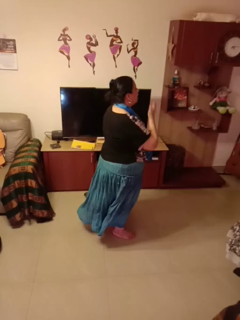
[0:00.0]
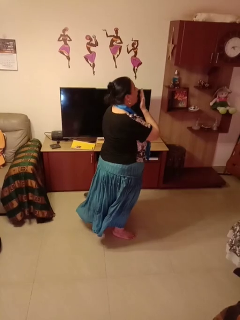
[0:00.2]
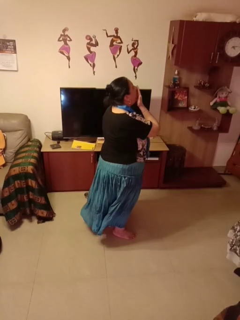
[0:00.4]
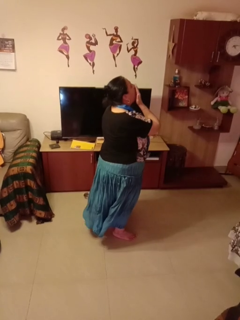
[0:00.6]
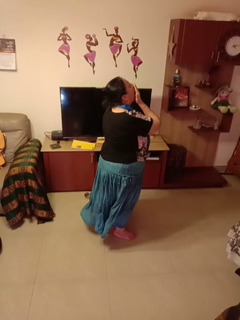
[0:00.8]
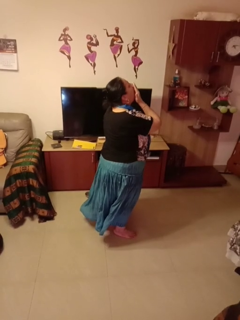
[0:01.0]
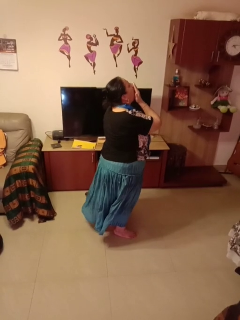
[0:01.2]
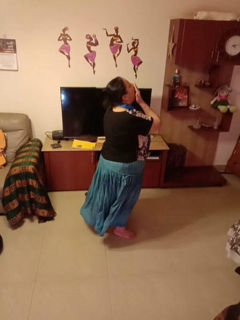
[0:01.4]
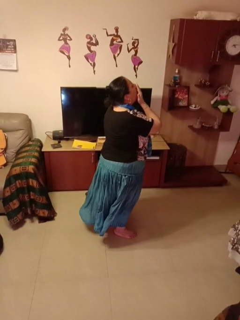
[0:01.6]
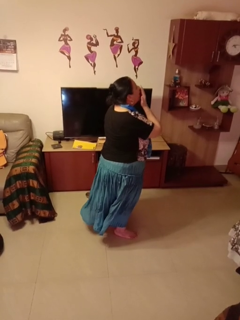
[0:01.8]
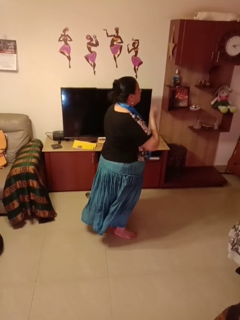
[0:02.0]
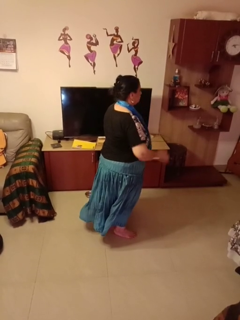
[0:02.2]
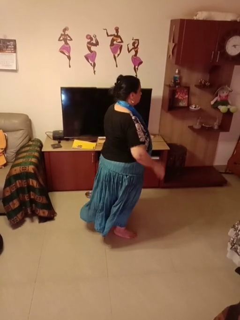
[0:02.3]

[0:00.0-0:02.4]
person yawns

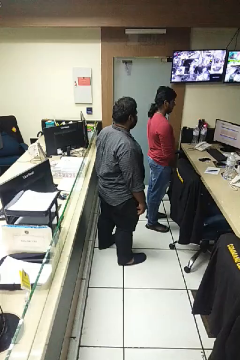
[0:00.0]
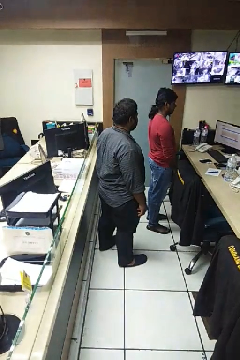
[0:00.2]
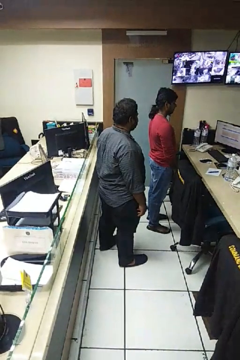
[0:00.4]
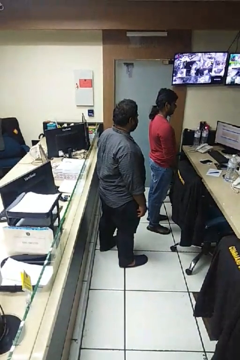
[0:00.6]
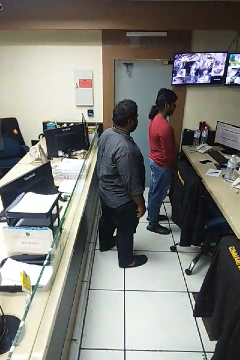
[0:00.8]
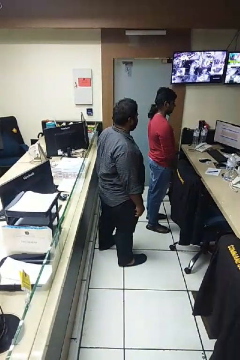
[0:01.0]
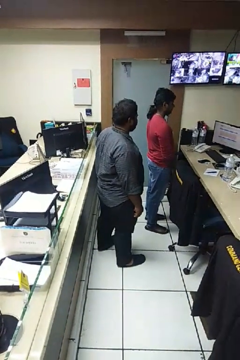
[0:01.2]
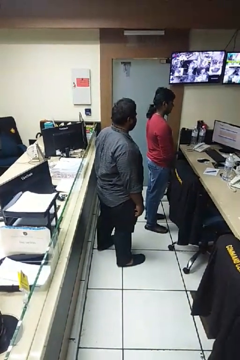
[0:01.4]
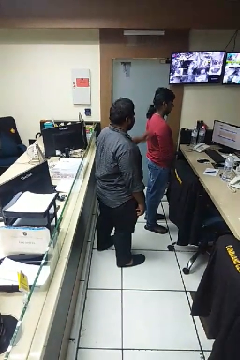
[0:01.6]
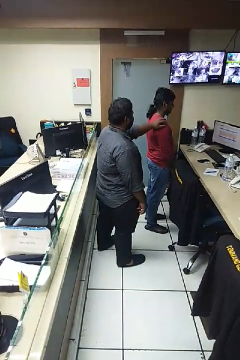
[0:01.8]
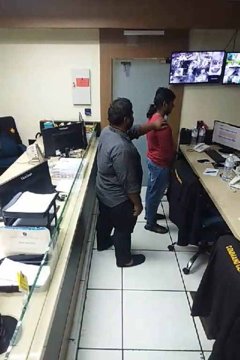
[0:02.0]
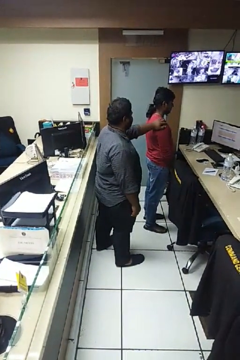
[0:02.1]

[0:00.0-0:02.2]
person grabs person by shoulder

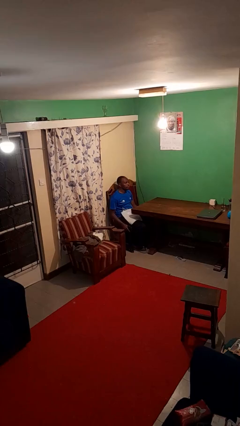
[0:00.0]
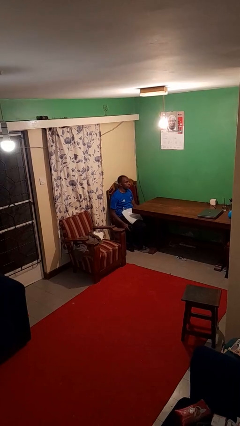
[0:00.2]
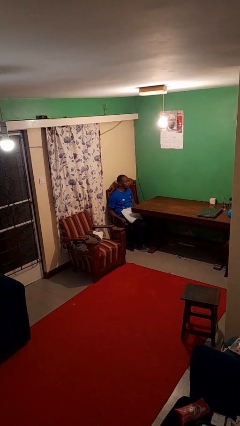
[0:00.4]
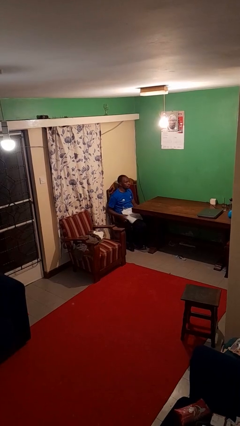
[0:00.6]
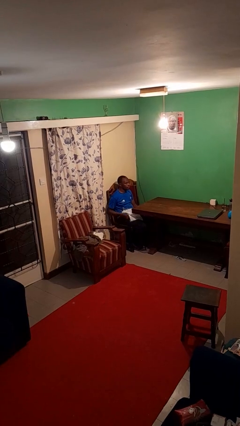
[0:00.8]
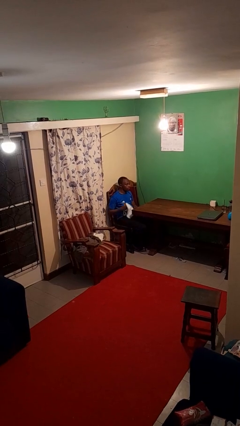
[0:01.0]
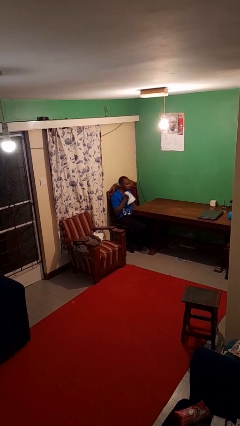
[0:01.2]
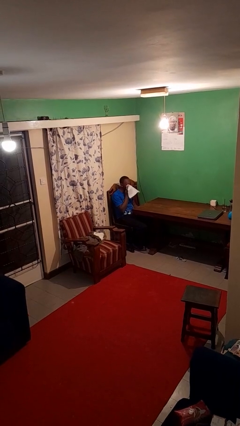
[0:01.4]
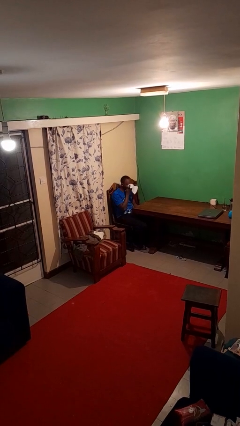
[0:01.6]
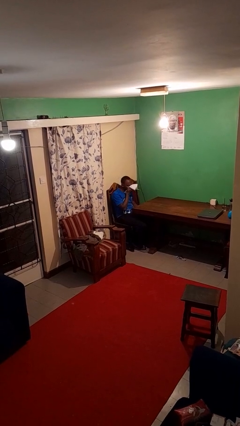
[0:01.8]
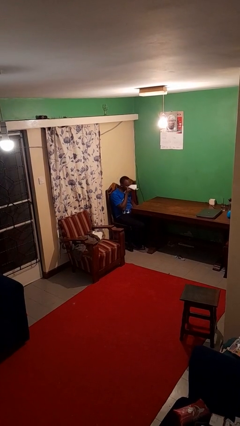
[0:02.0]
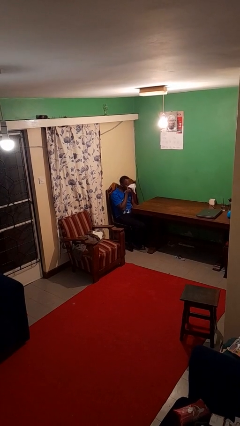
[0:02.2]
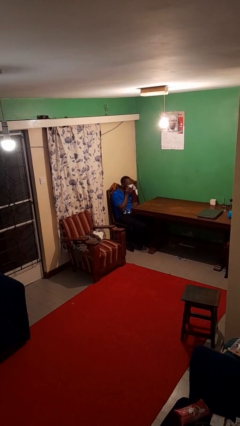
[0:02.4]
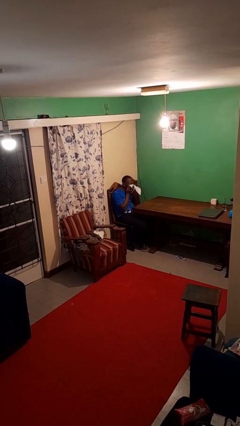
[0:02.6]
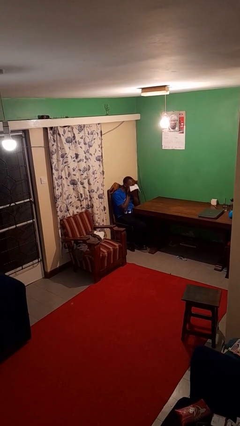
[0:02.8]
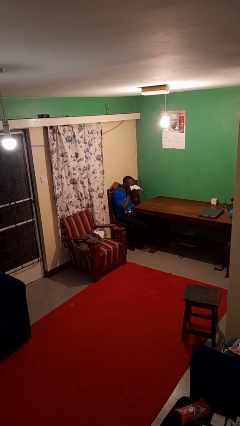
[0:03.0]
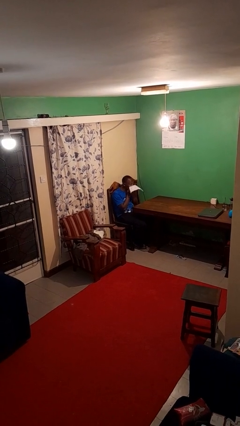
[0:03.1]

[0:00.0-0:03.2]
person wipes mouth with napkin

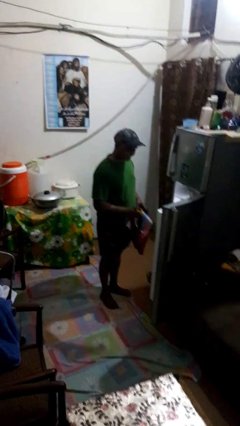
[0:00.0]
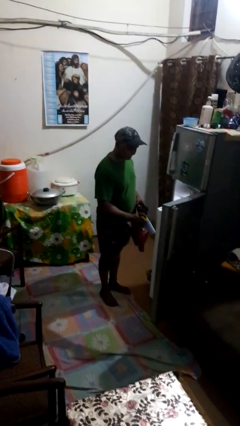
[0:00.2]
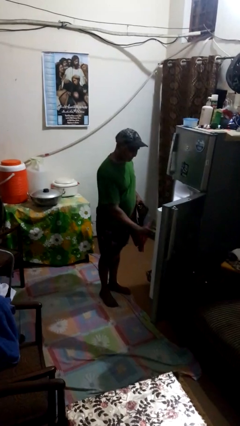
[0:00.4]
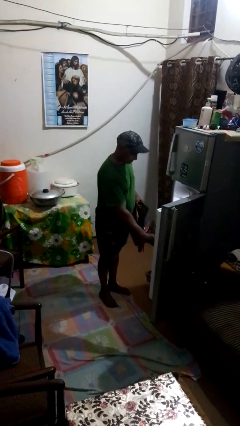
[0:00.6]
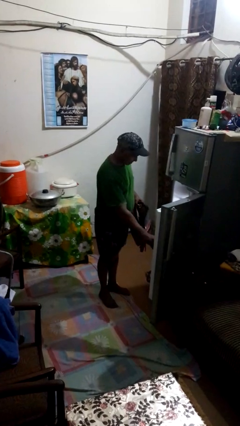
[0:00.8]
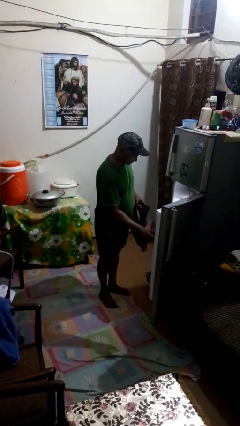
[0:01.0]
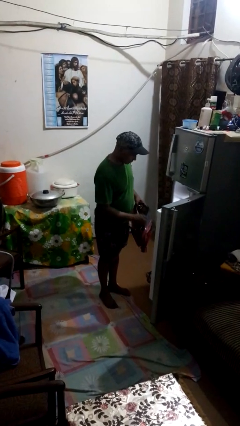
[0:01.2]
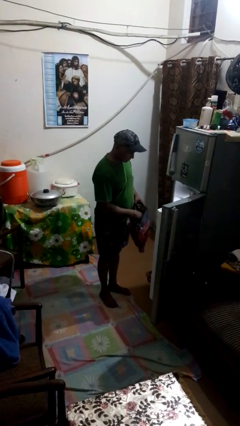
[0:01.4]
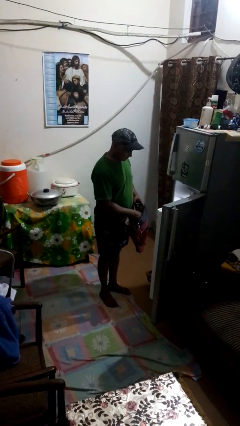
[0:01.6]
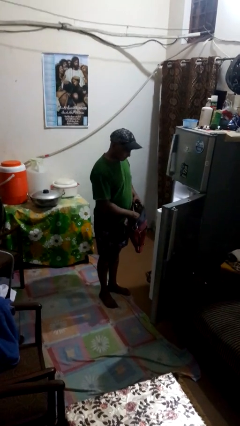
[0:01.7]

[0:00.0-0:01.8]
person loads groceries into refrigerator

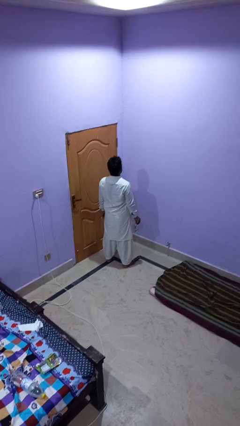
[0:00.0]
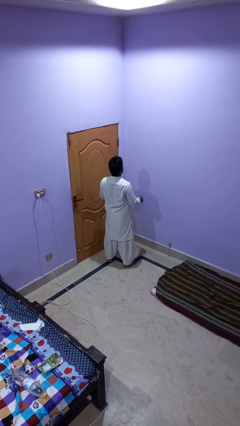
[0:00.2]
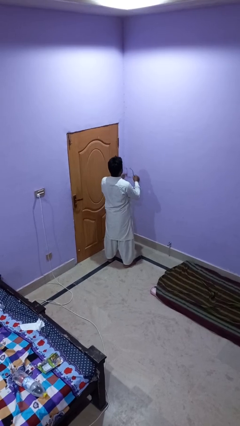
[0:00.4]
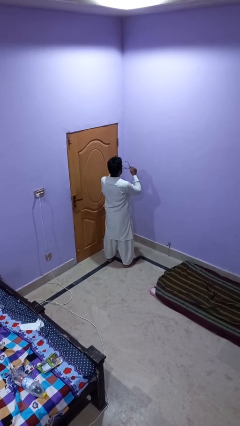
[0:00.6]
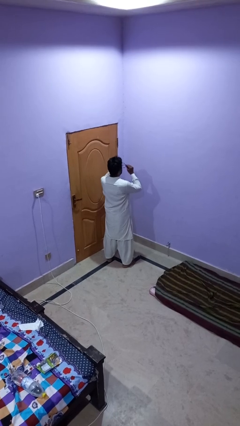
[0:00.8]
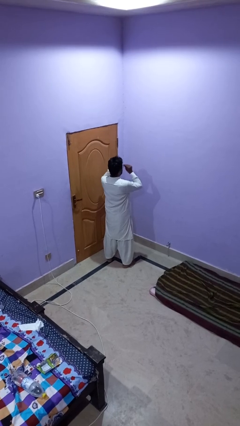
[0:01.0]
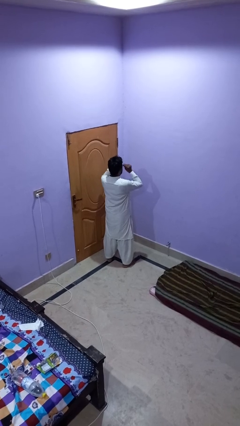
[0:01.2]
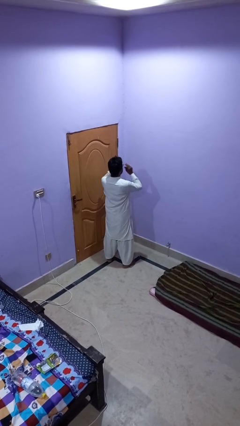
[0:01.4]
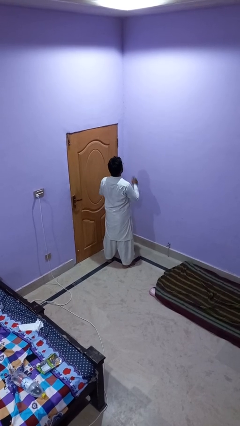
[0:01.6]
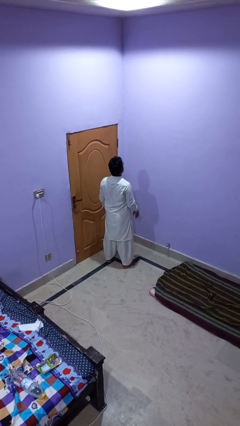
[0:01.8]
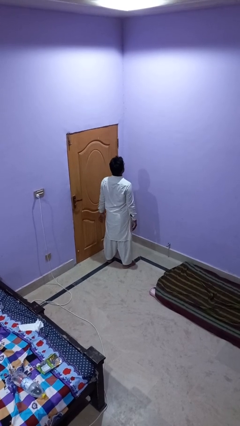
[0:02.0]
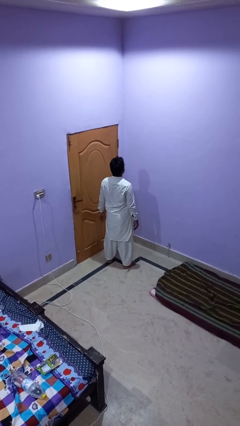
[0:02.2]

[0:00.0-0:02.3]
person puts on glasses

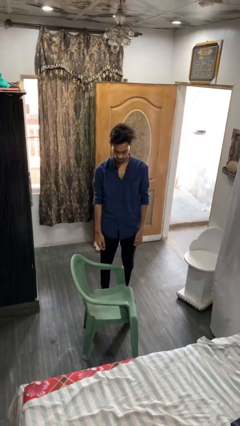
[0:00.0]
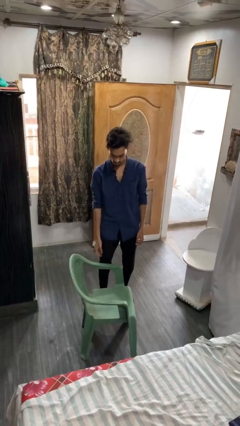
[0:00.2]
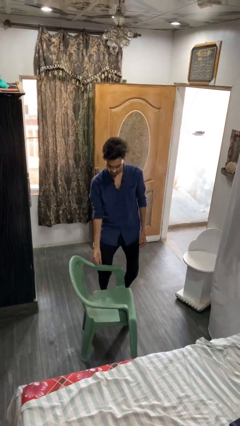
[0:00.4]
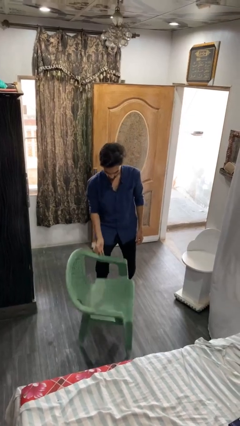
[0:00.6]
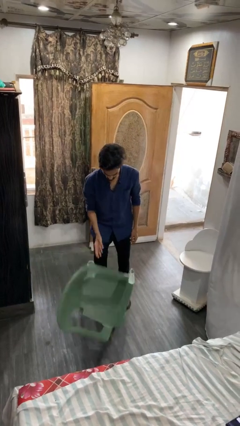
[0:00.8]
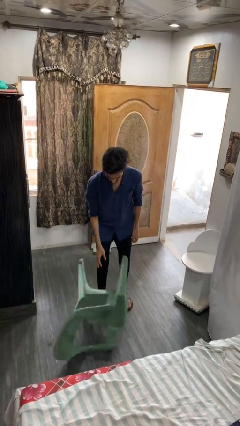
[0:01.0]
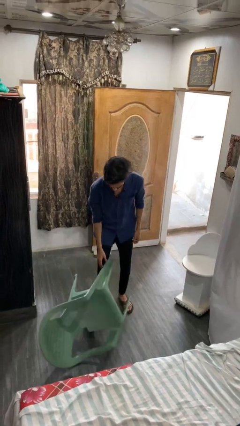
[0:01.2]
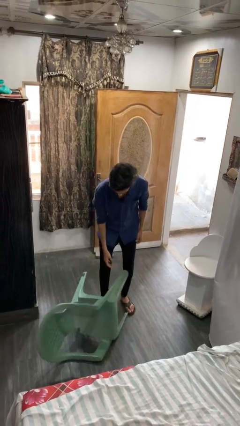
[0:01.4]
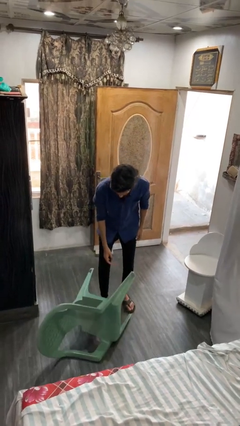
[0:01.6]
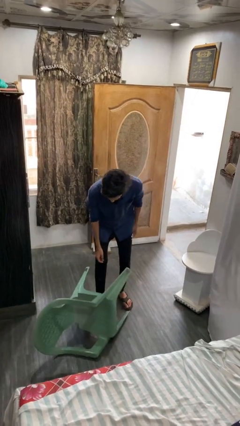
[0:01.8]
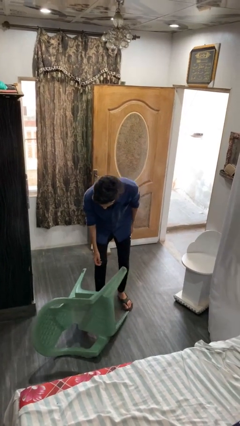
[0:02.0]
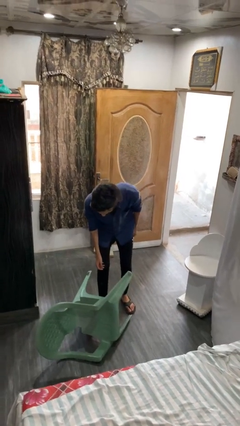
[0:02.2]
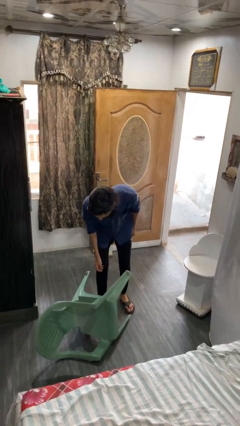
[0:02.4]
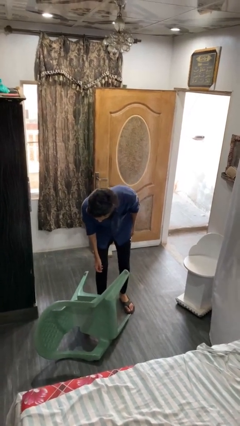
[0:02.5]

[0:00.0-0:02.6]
person knocks over furniture

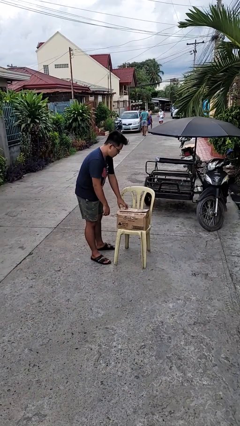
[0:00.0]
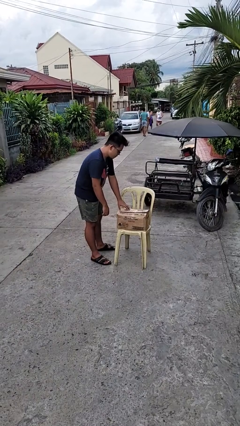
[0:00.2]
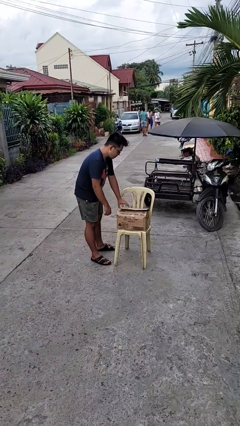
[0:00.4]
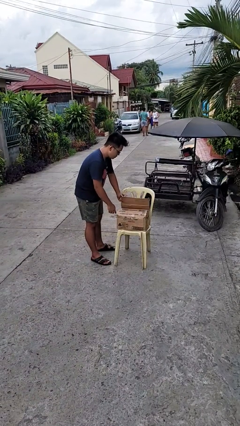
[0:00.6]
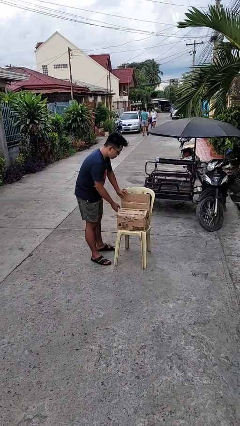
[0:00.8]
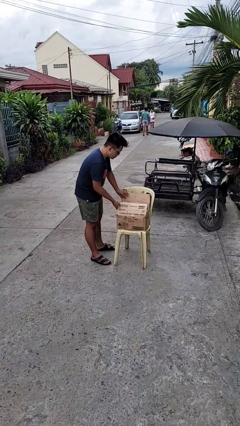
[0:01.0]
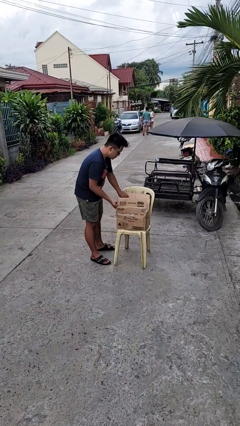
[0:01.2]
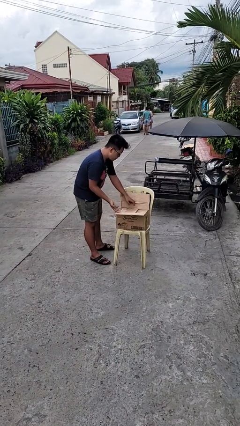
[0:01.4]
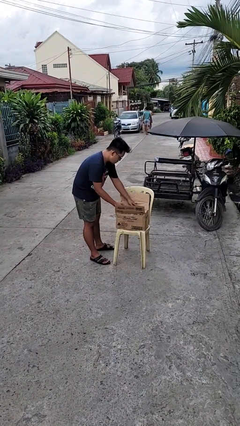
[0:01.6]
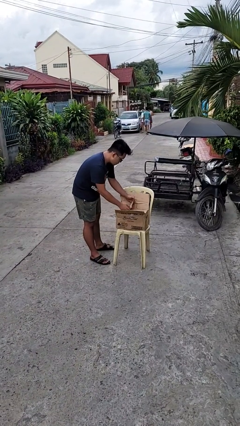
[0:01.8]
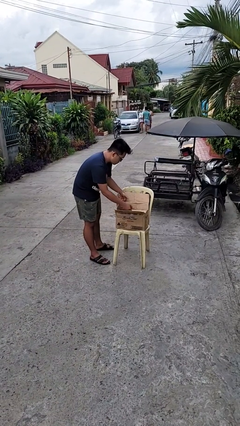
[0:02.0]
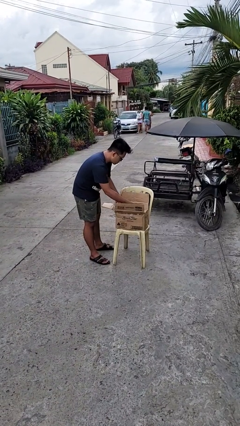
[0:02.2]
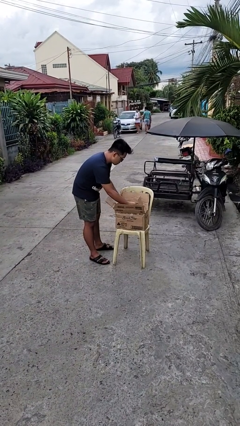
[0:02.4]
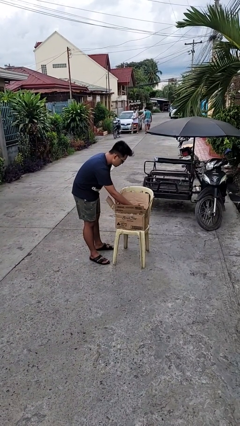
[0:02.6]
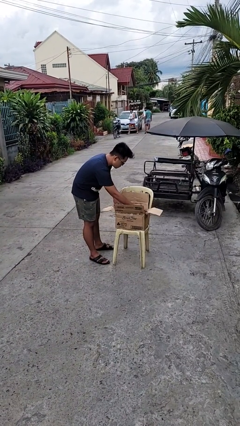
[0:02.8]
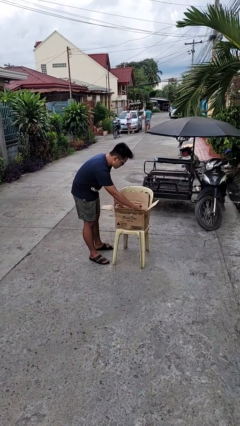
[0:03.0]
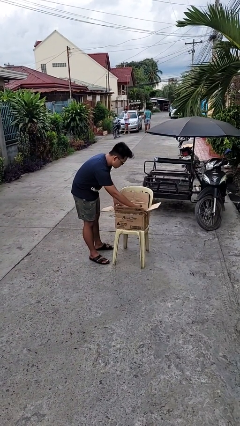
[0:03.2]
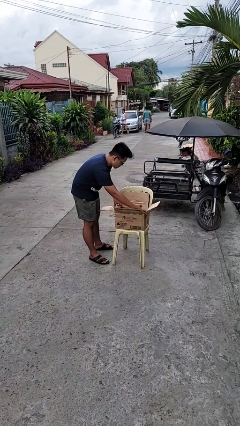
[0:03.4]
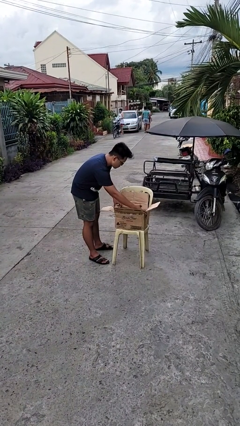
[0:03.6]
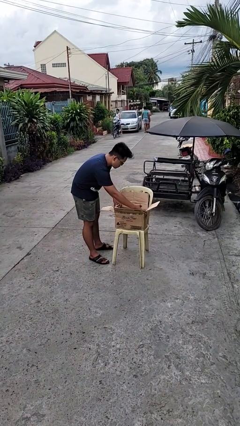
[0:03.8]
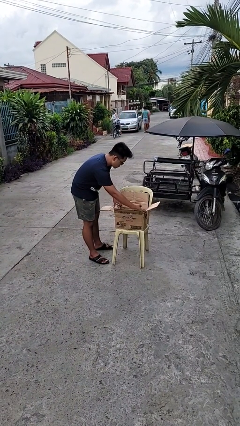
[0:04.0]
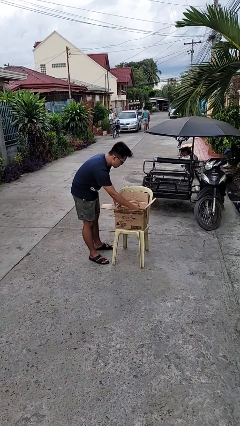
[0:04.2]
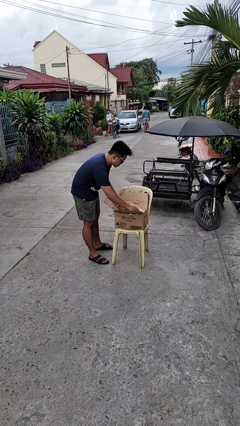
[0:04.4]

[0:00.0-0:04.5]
person opens box
